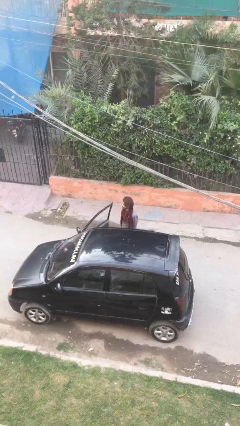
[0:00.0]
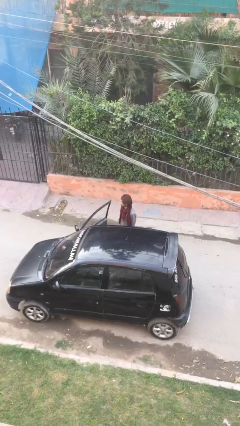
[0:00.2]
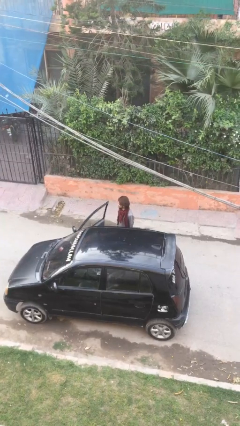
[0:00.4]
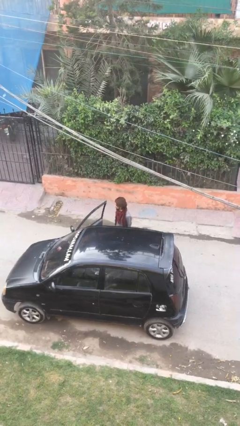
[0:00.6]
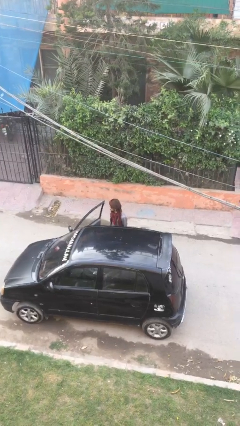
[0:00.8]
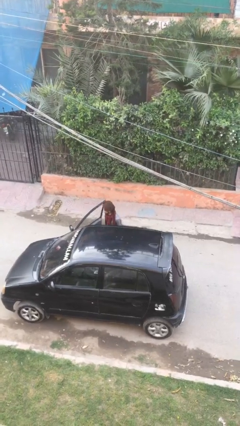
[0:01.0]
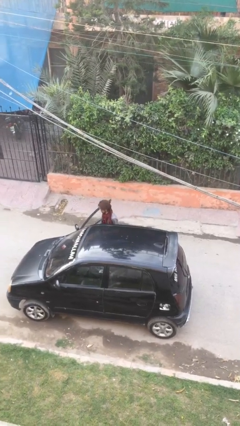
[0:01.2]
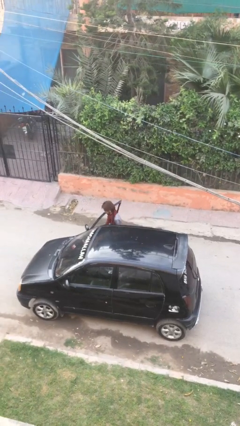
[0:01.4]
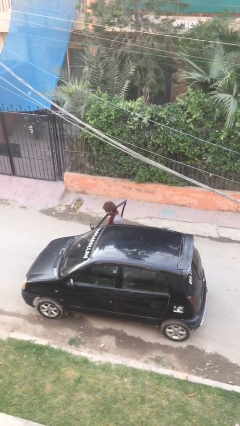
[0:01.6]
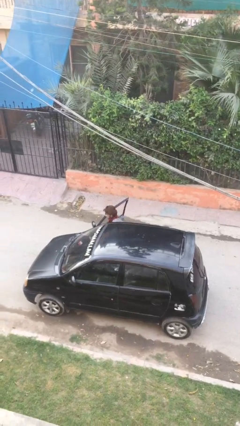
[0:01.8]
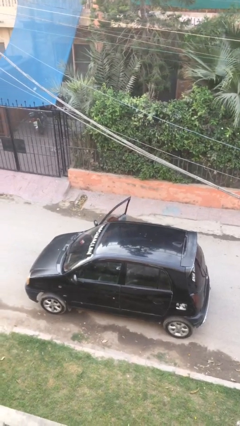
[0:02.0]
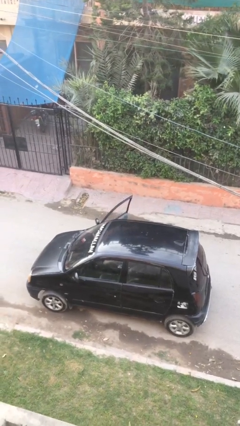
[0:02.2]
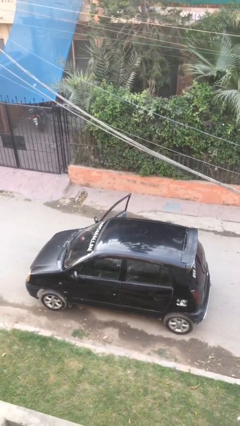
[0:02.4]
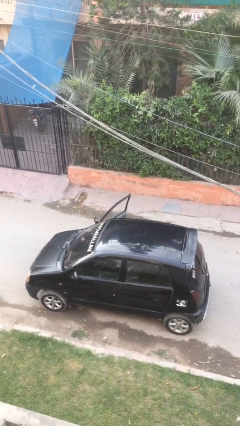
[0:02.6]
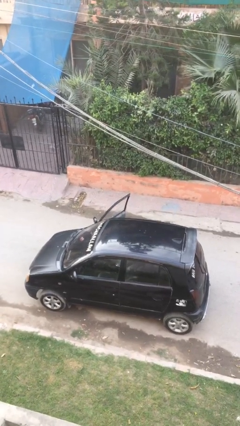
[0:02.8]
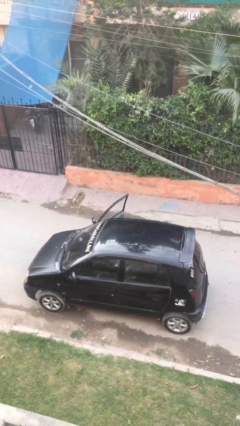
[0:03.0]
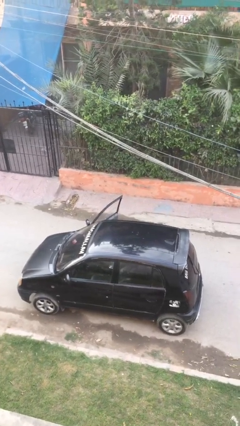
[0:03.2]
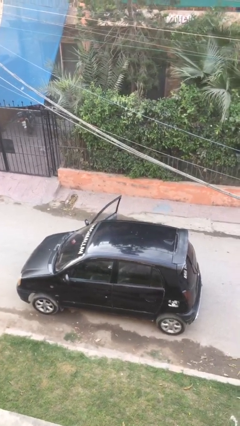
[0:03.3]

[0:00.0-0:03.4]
person enters car

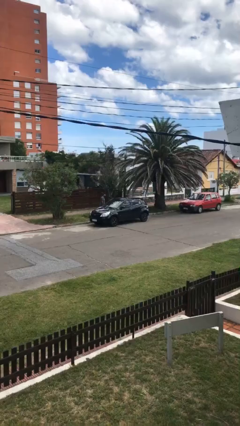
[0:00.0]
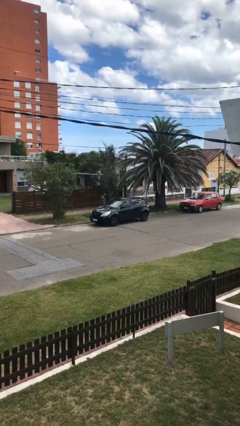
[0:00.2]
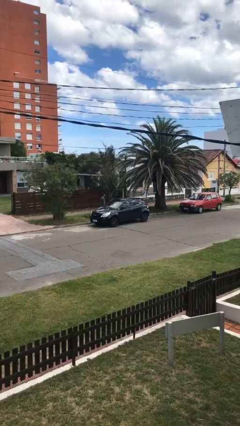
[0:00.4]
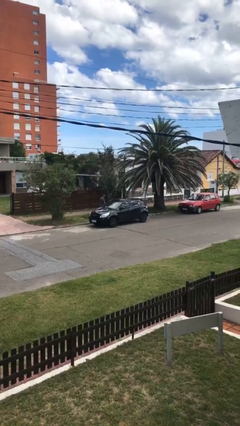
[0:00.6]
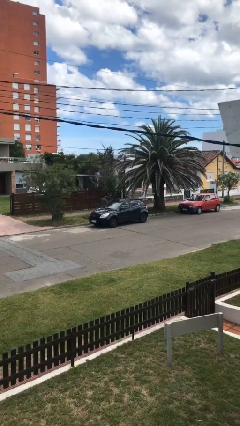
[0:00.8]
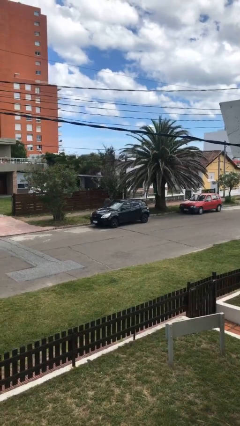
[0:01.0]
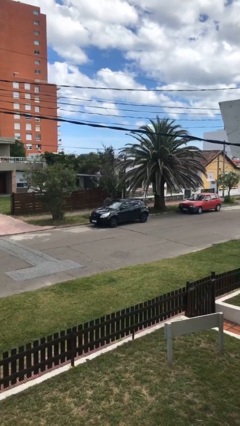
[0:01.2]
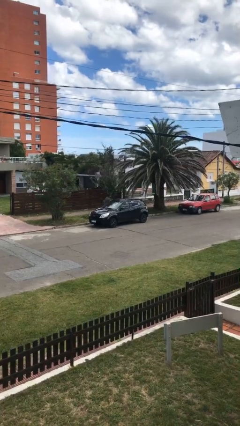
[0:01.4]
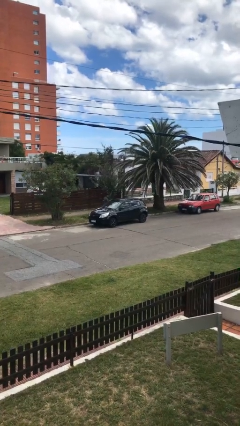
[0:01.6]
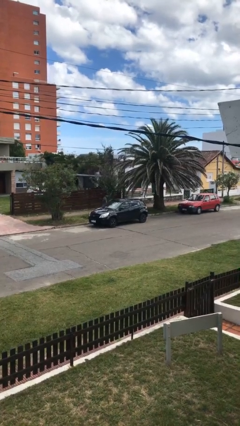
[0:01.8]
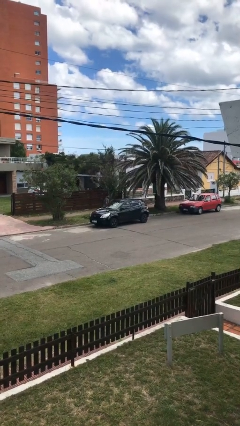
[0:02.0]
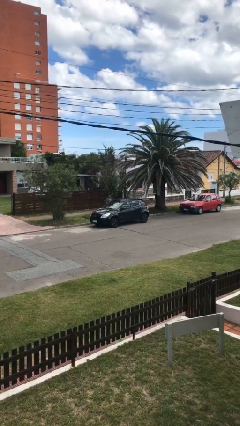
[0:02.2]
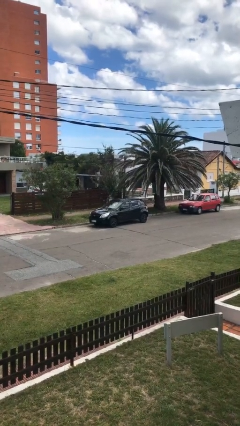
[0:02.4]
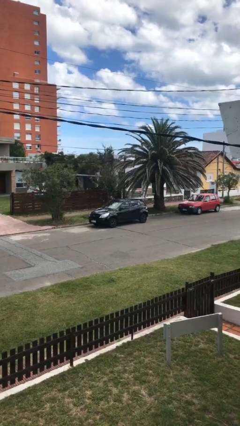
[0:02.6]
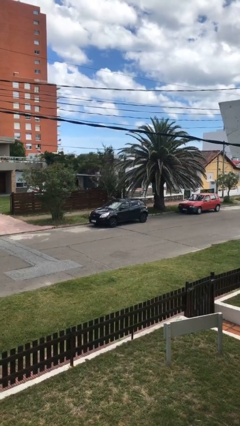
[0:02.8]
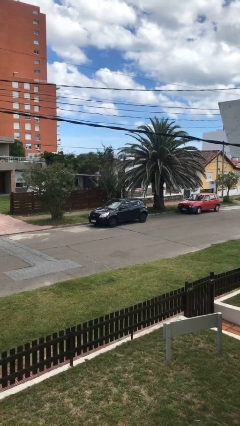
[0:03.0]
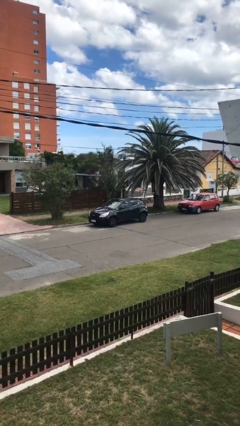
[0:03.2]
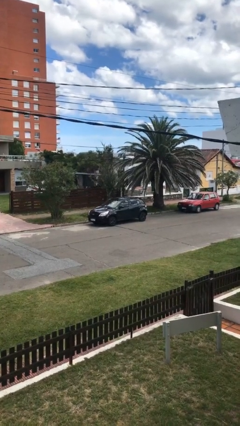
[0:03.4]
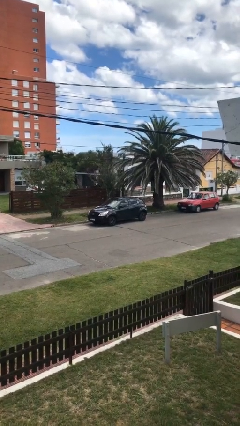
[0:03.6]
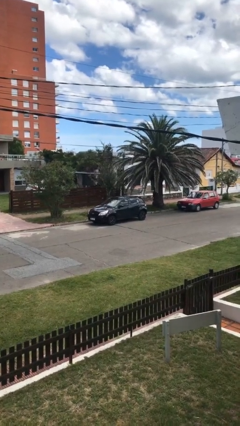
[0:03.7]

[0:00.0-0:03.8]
car picks up person

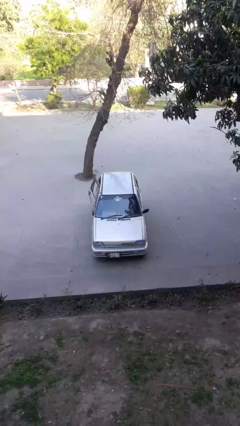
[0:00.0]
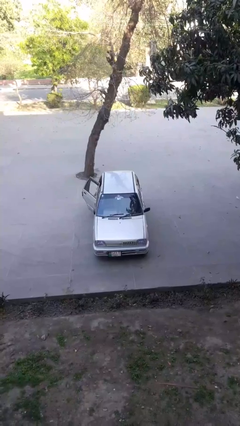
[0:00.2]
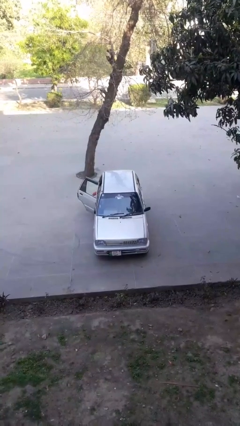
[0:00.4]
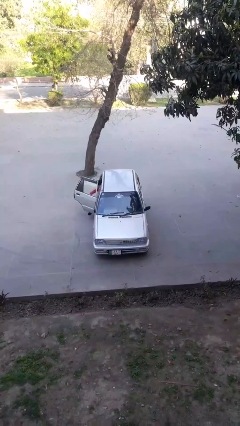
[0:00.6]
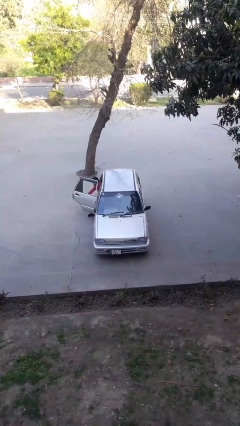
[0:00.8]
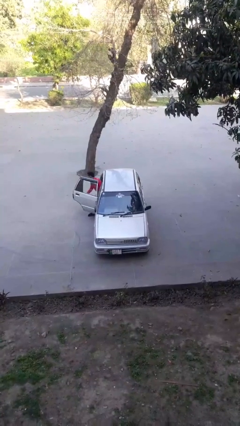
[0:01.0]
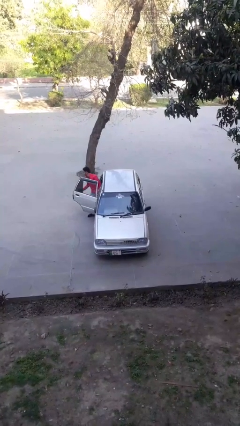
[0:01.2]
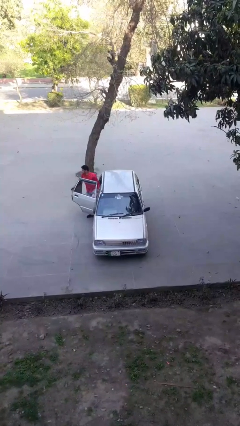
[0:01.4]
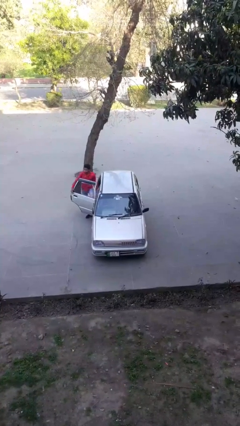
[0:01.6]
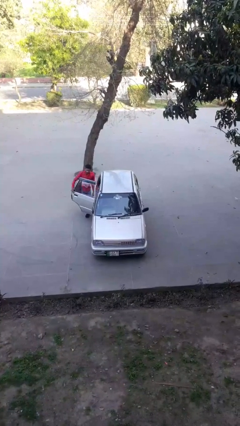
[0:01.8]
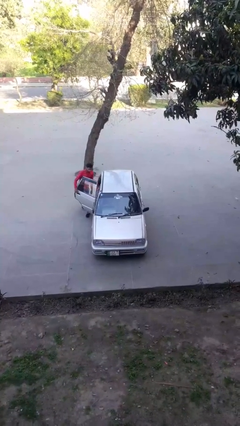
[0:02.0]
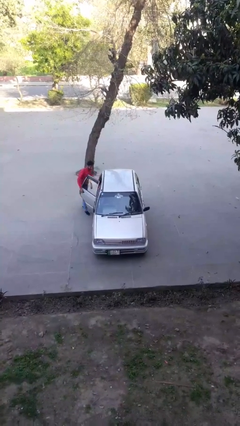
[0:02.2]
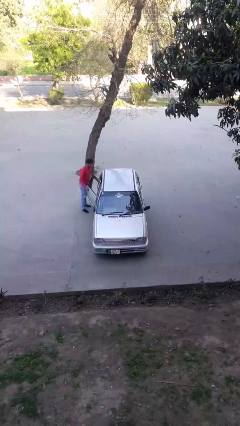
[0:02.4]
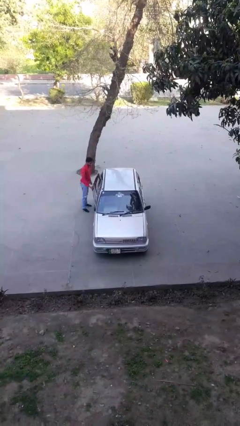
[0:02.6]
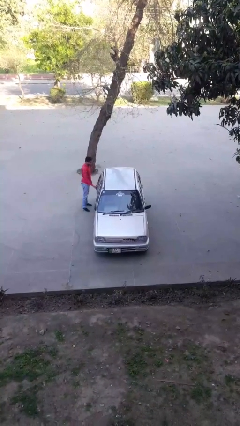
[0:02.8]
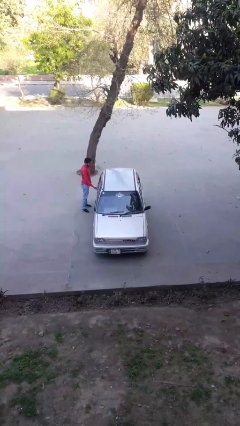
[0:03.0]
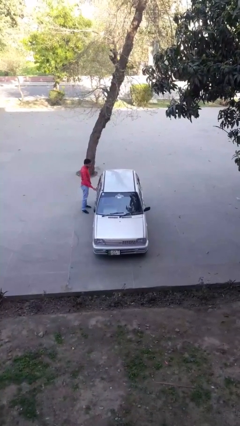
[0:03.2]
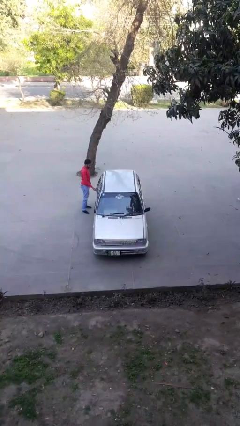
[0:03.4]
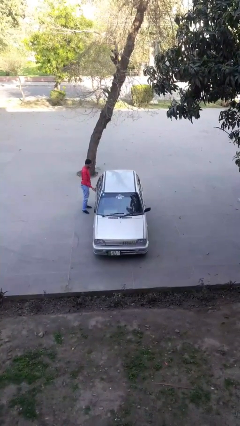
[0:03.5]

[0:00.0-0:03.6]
car drops off person

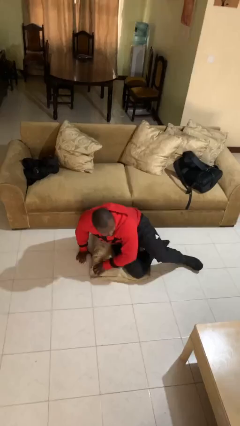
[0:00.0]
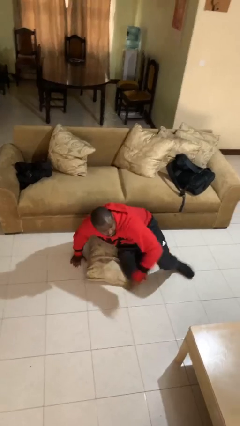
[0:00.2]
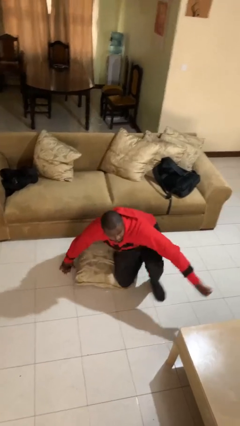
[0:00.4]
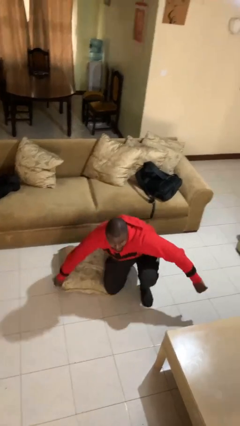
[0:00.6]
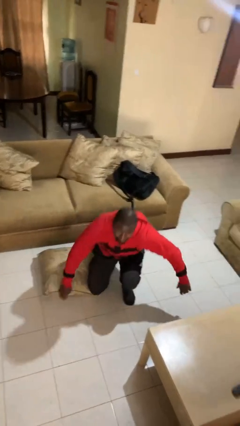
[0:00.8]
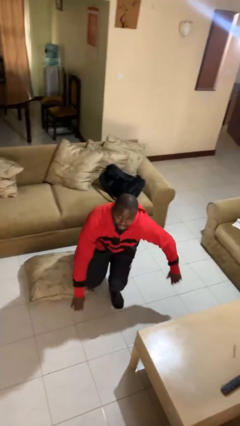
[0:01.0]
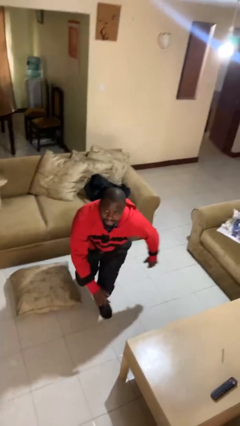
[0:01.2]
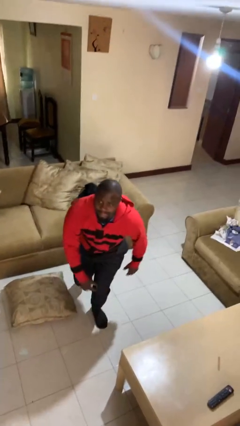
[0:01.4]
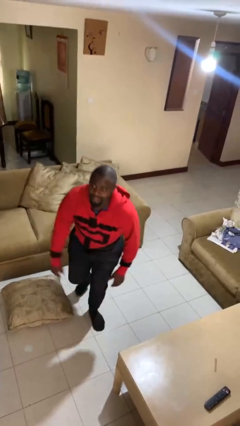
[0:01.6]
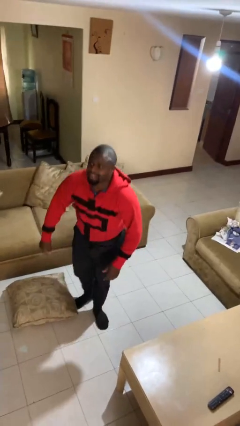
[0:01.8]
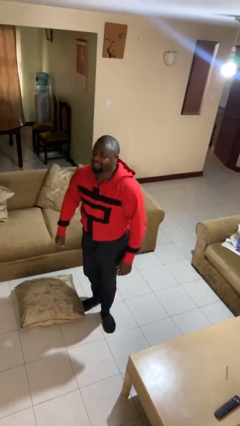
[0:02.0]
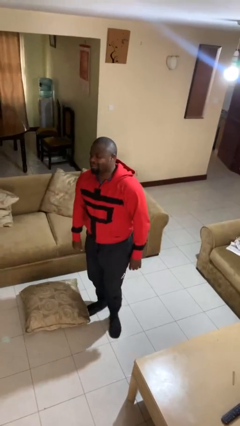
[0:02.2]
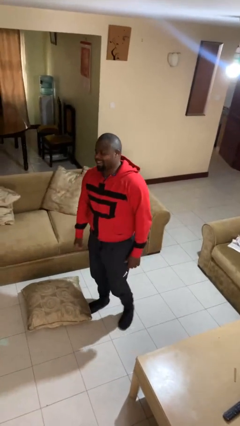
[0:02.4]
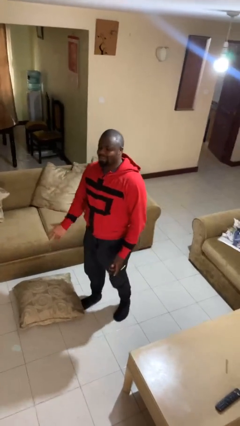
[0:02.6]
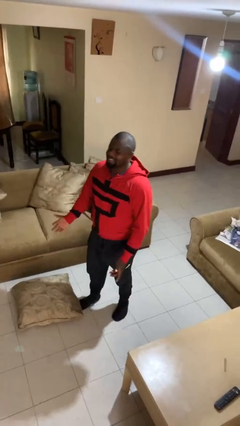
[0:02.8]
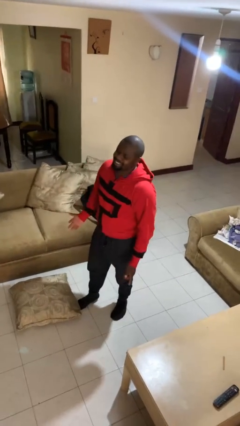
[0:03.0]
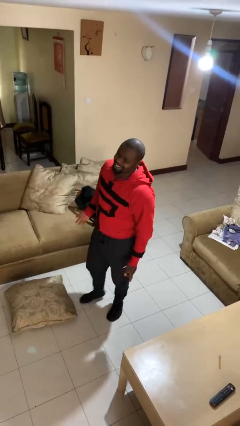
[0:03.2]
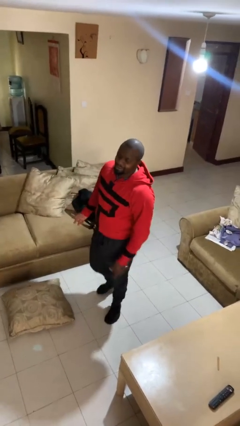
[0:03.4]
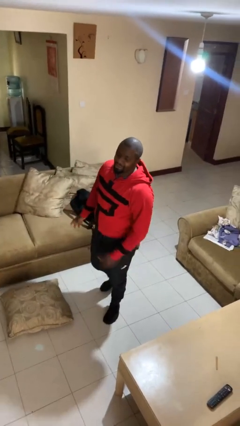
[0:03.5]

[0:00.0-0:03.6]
person stands up from floor

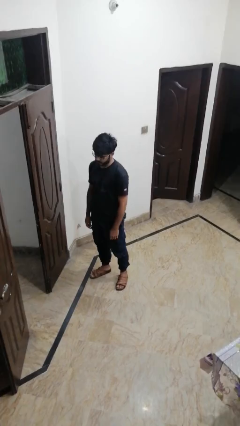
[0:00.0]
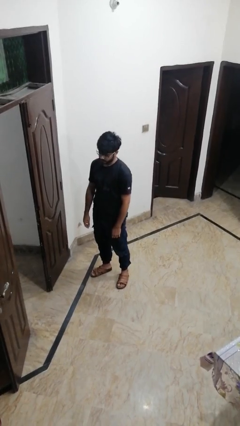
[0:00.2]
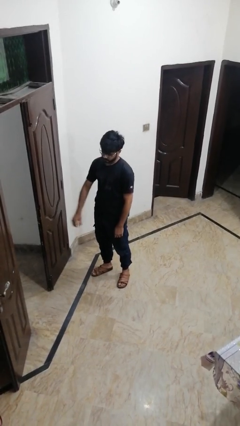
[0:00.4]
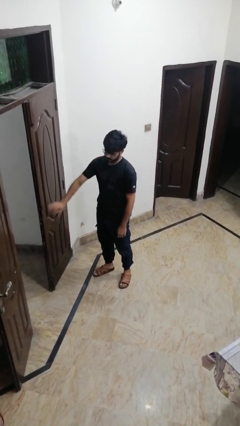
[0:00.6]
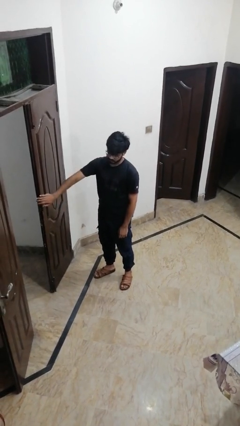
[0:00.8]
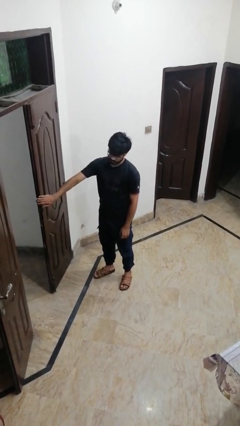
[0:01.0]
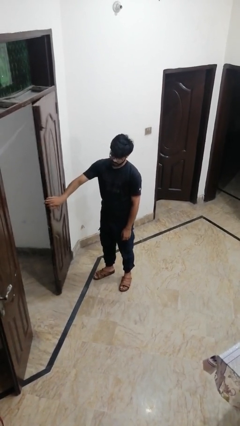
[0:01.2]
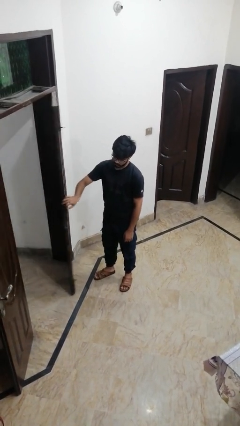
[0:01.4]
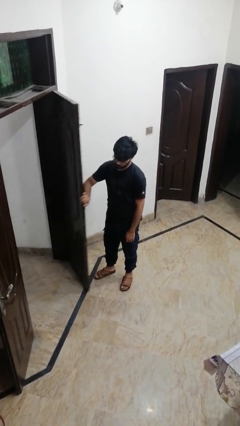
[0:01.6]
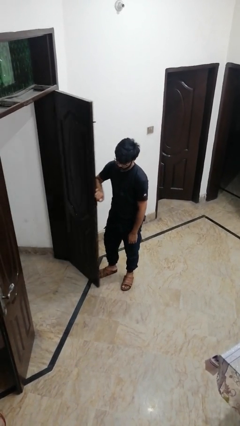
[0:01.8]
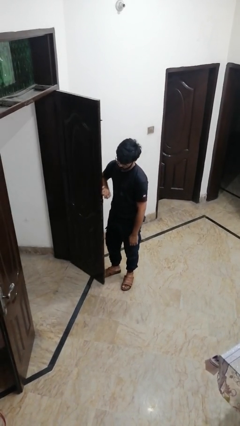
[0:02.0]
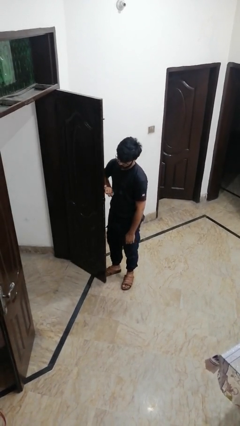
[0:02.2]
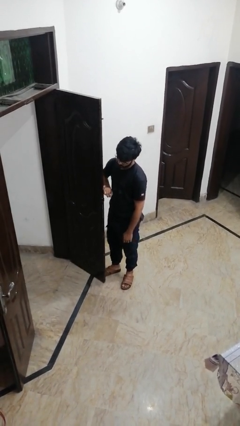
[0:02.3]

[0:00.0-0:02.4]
person opens facility door

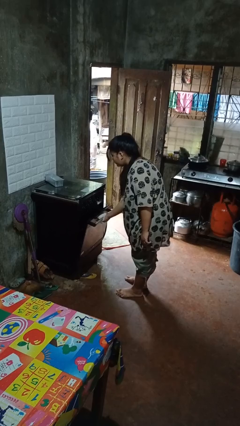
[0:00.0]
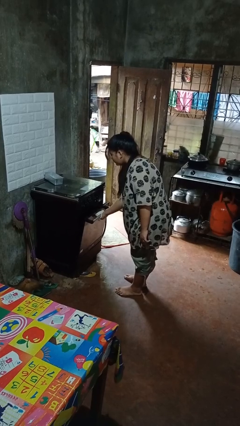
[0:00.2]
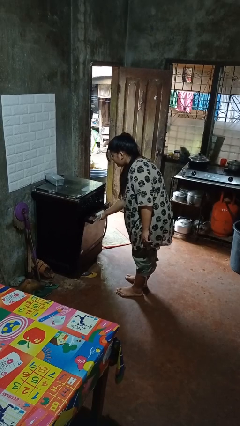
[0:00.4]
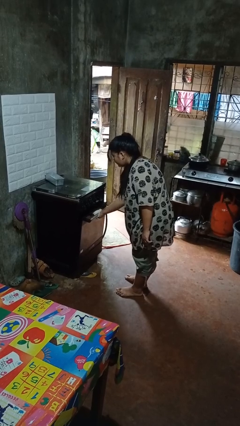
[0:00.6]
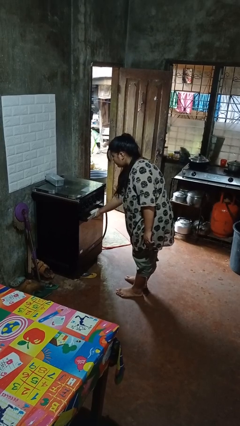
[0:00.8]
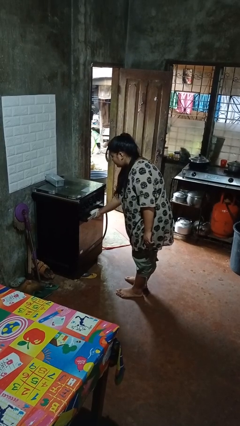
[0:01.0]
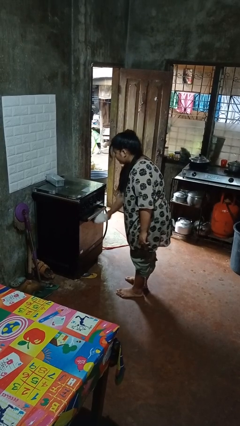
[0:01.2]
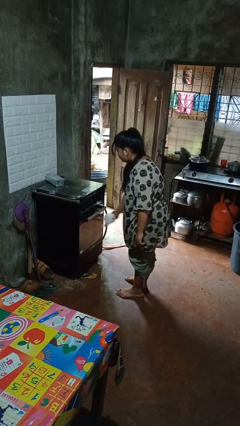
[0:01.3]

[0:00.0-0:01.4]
person closes oven door
